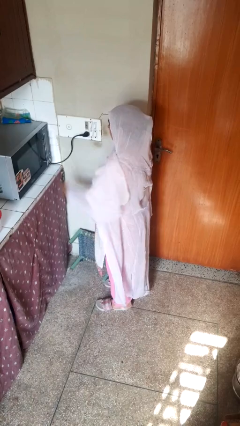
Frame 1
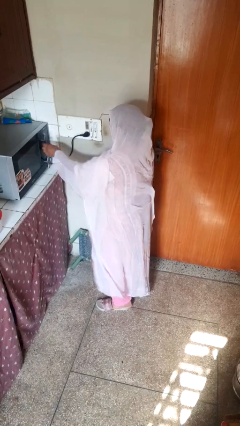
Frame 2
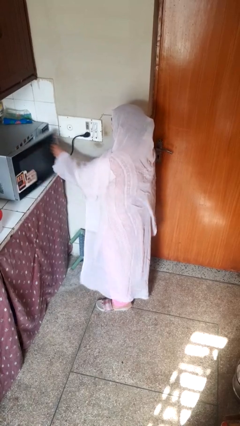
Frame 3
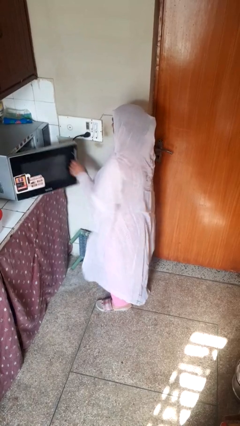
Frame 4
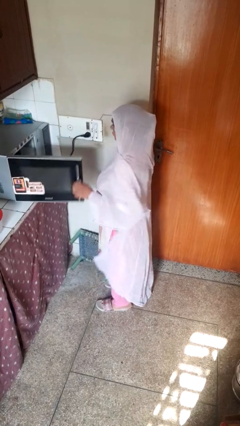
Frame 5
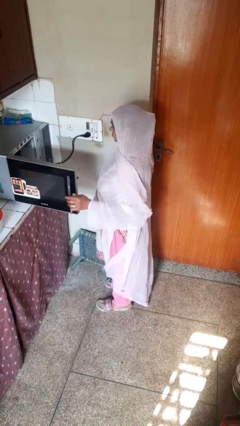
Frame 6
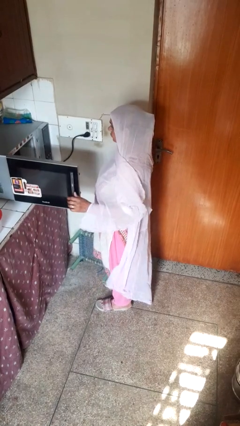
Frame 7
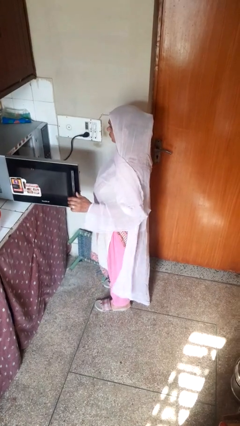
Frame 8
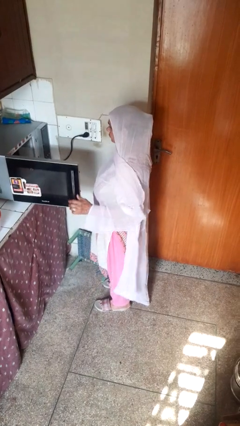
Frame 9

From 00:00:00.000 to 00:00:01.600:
person opens oven door

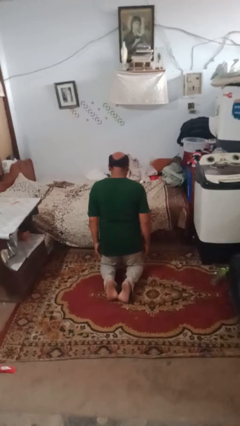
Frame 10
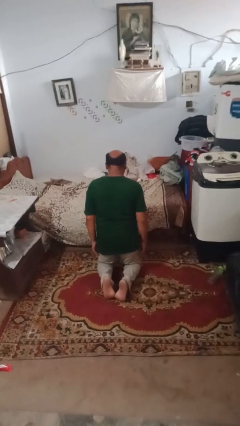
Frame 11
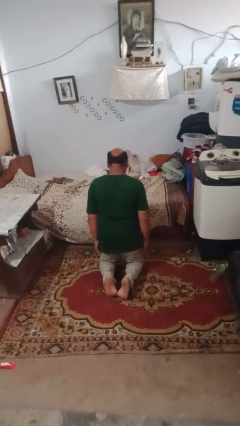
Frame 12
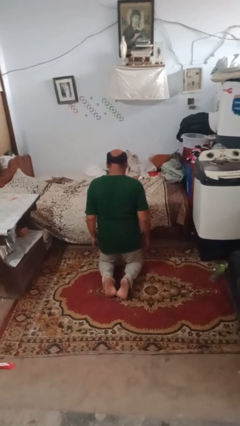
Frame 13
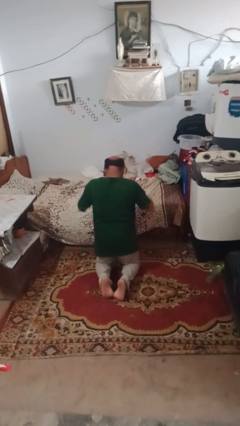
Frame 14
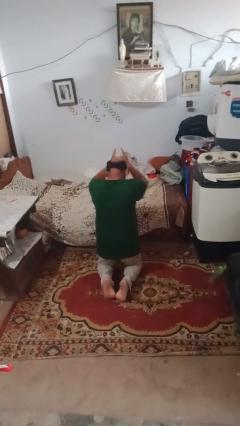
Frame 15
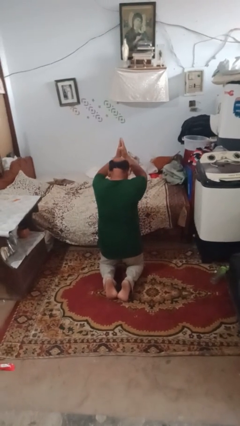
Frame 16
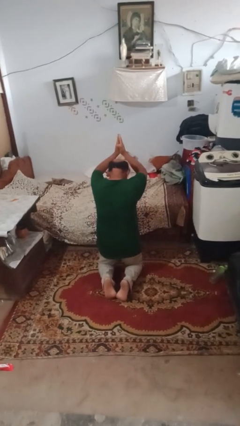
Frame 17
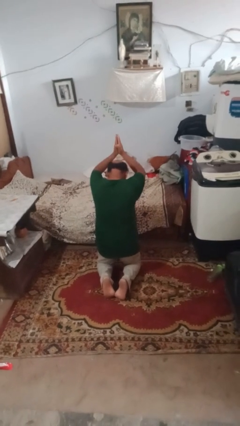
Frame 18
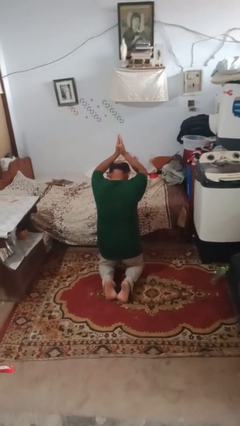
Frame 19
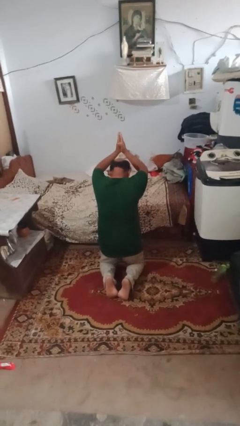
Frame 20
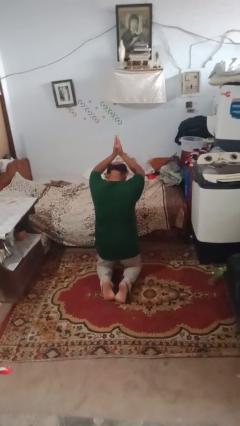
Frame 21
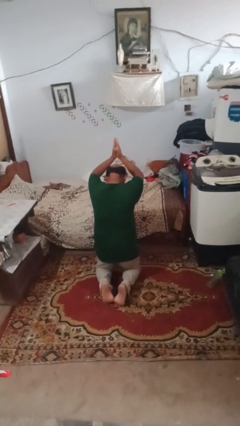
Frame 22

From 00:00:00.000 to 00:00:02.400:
person prays

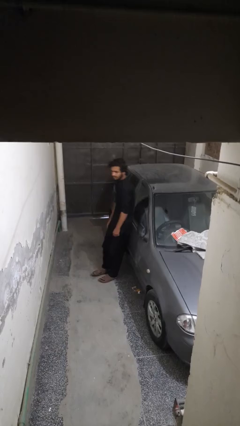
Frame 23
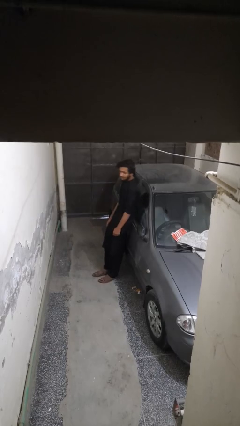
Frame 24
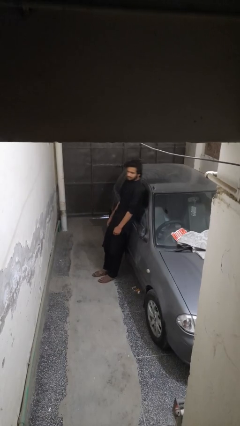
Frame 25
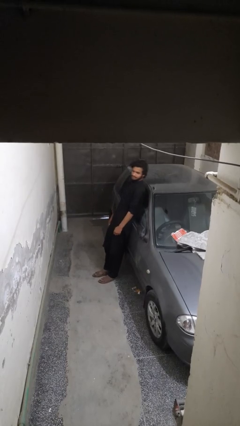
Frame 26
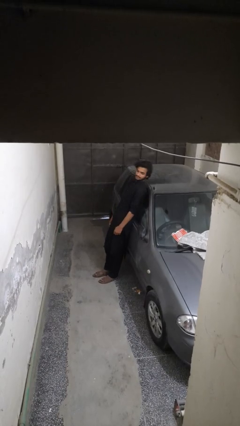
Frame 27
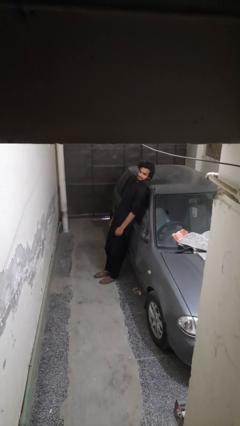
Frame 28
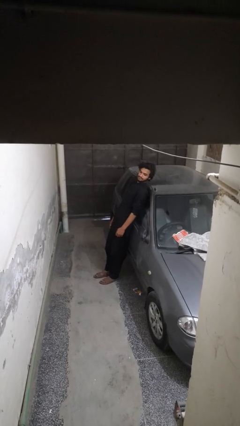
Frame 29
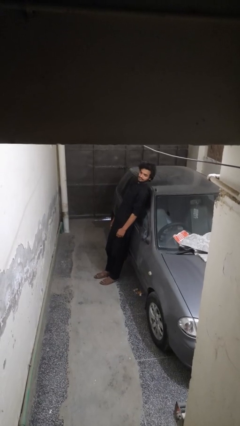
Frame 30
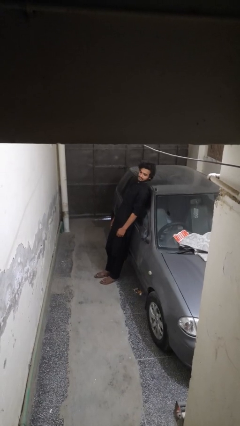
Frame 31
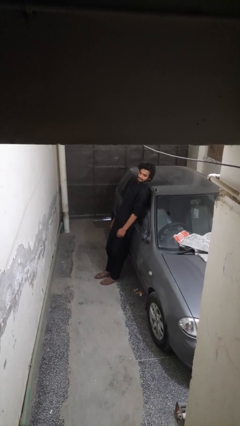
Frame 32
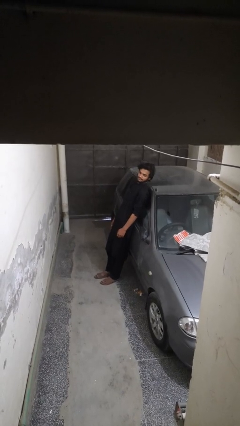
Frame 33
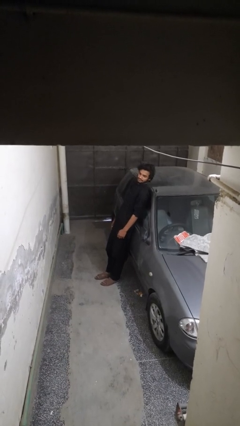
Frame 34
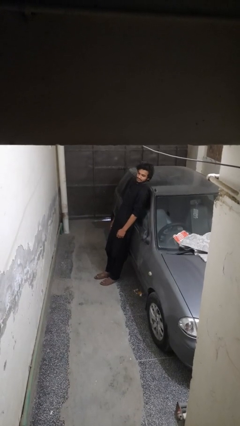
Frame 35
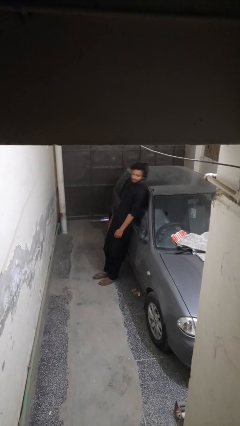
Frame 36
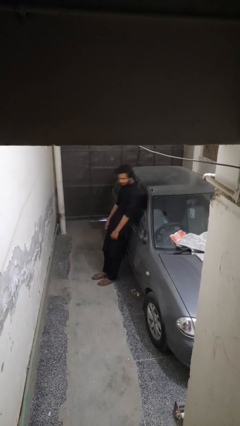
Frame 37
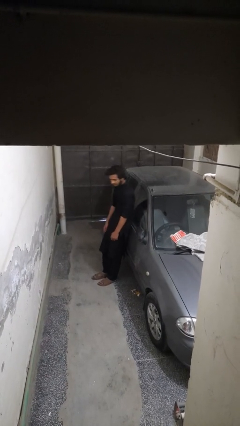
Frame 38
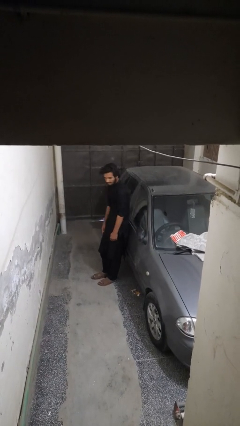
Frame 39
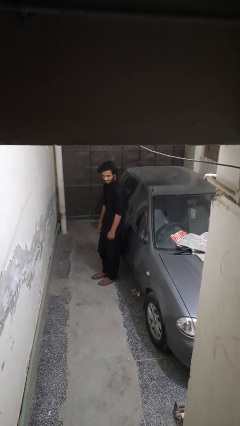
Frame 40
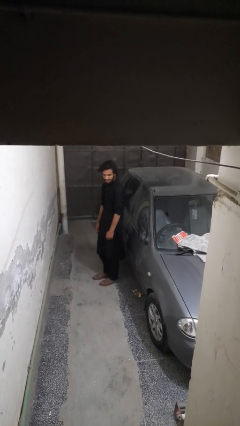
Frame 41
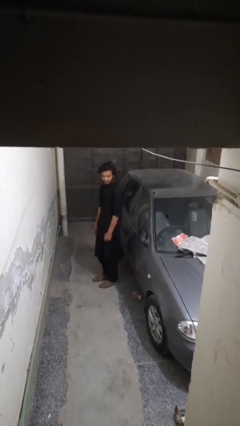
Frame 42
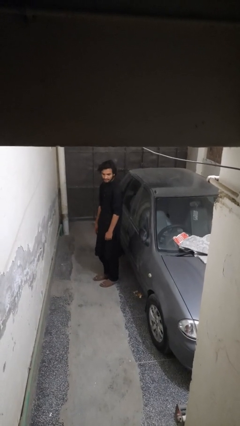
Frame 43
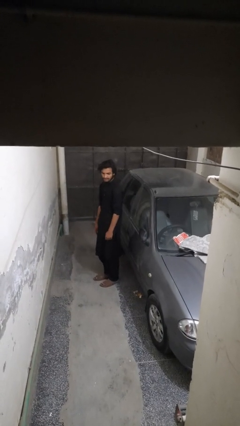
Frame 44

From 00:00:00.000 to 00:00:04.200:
person leans against car

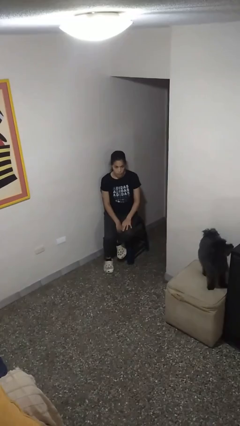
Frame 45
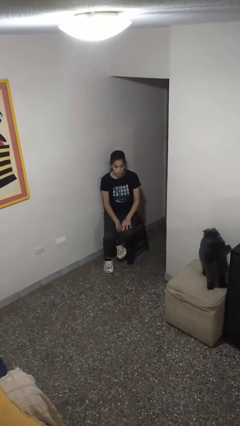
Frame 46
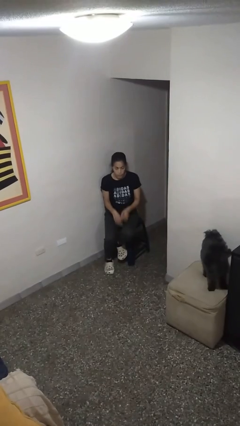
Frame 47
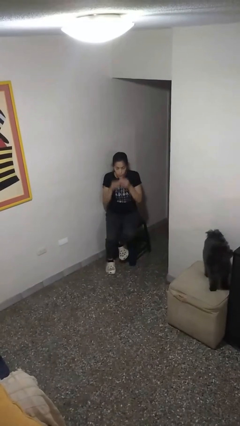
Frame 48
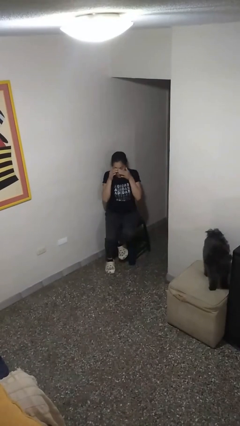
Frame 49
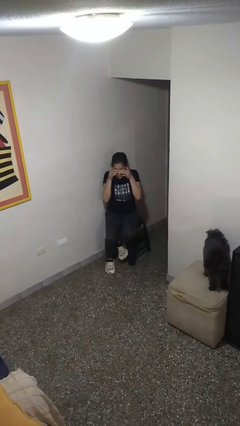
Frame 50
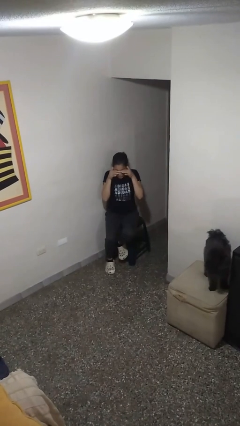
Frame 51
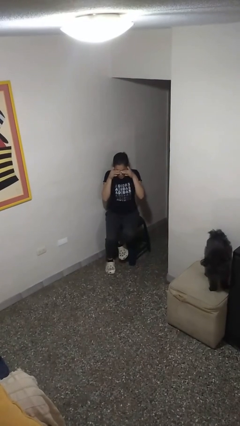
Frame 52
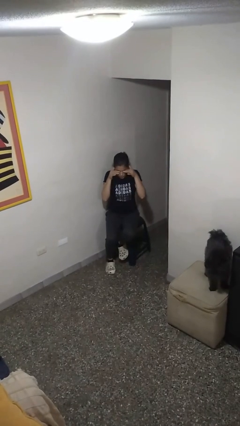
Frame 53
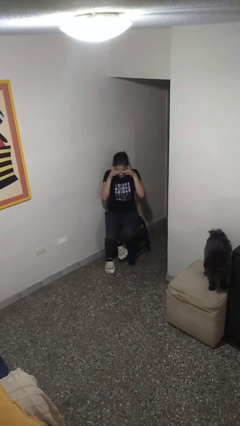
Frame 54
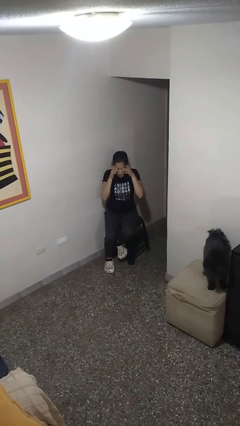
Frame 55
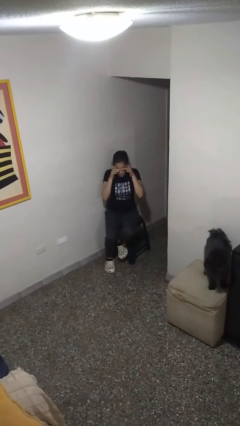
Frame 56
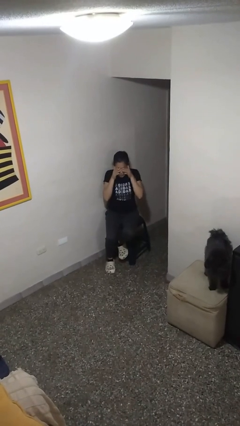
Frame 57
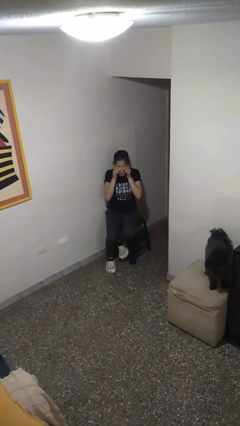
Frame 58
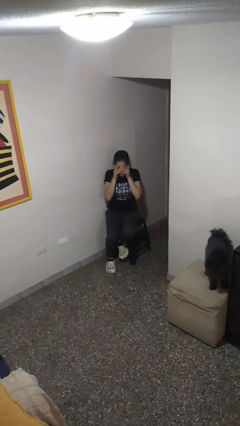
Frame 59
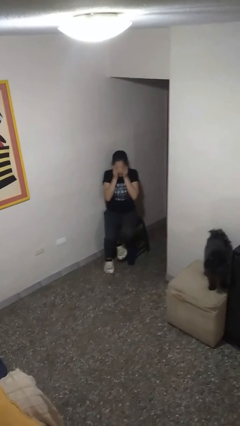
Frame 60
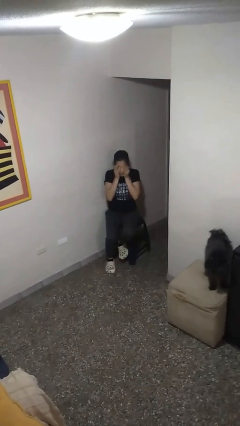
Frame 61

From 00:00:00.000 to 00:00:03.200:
person rubs eyes

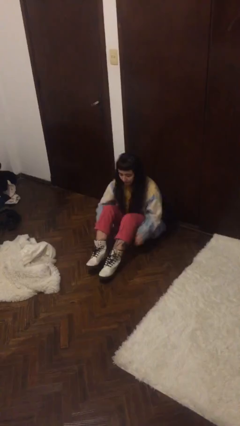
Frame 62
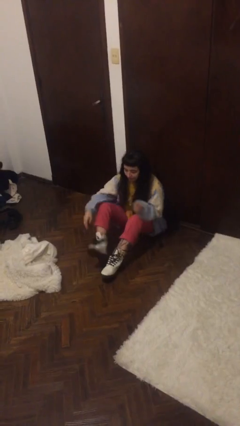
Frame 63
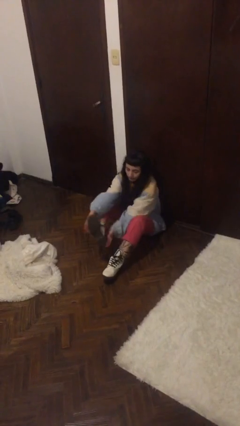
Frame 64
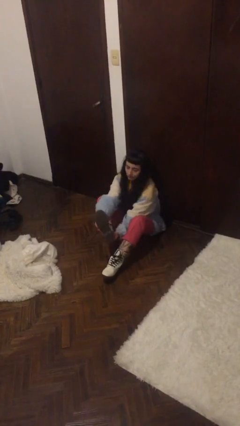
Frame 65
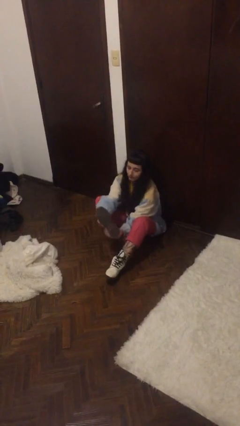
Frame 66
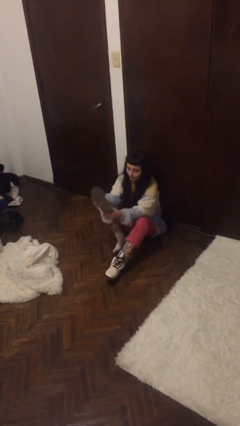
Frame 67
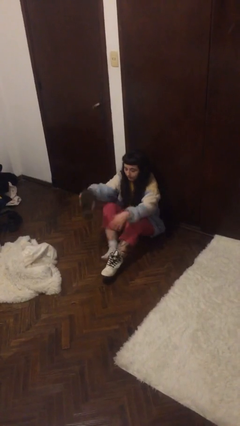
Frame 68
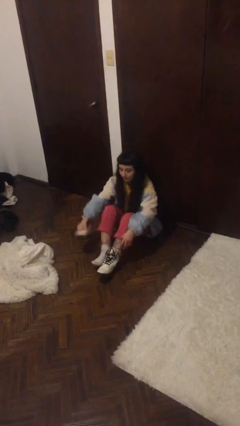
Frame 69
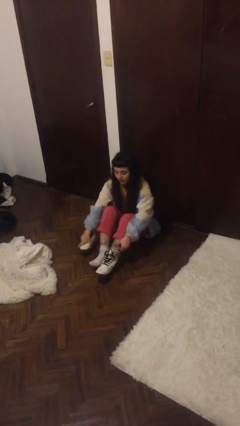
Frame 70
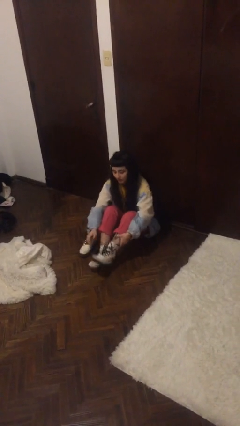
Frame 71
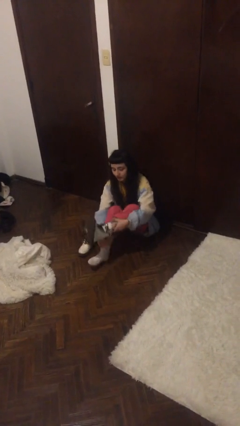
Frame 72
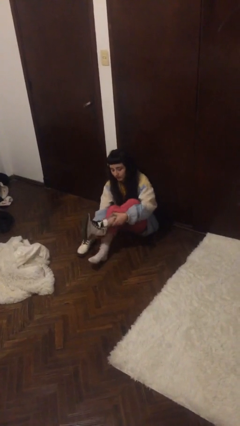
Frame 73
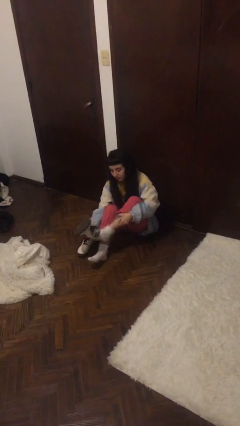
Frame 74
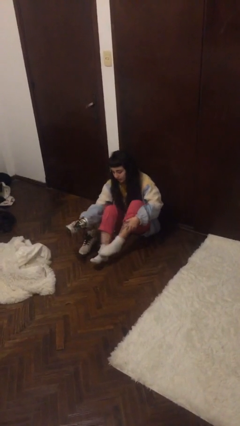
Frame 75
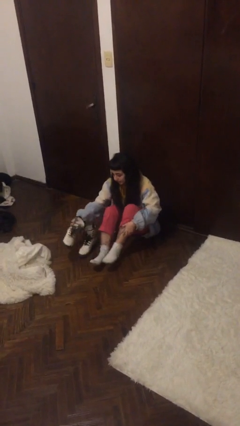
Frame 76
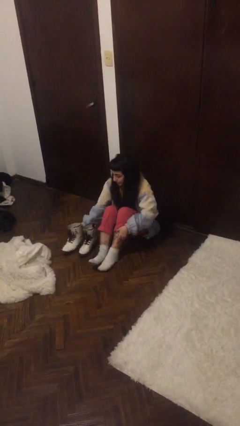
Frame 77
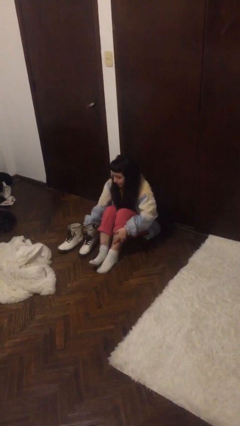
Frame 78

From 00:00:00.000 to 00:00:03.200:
person takes off boots

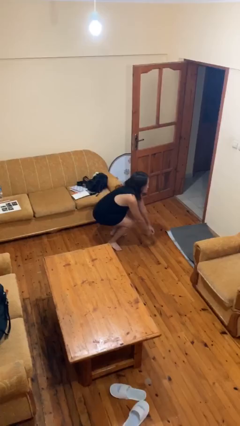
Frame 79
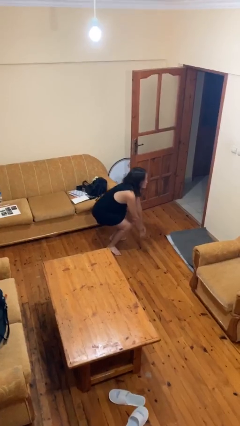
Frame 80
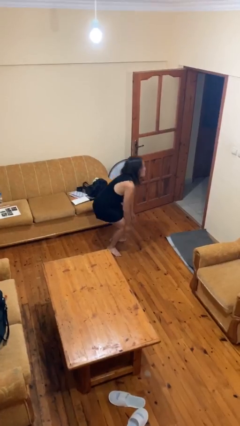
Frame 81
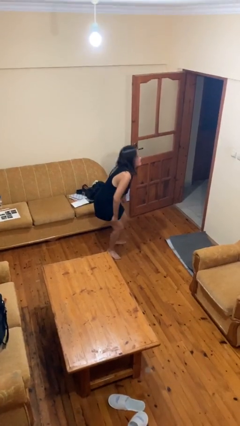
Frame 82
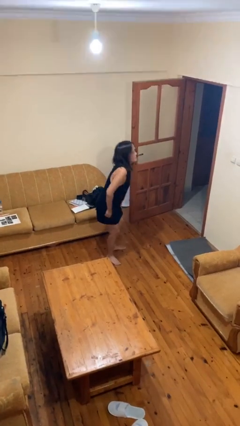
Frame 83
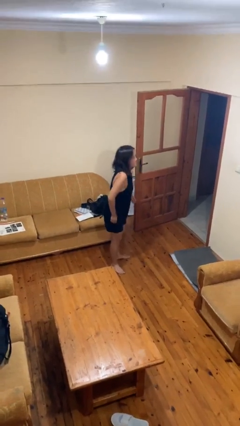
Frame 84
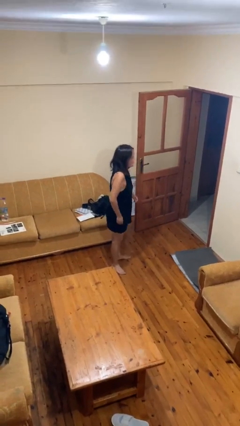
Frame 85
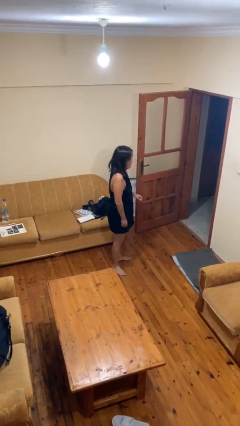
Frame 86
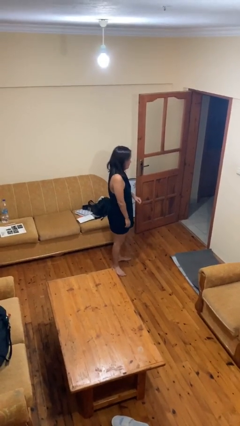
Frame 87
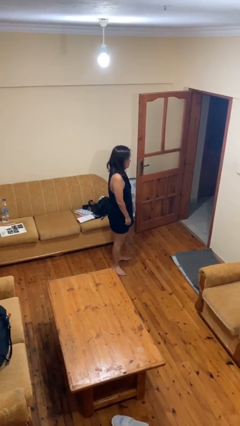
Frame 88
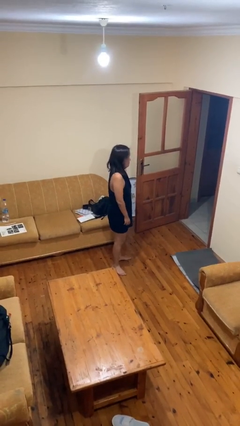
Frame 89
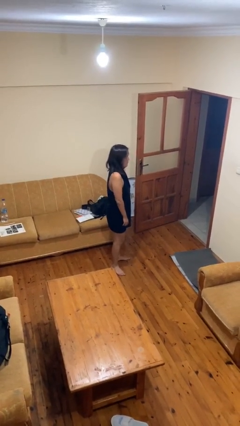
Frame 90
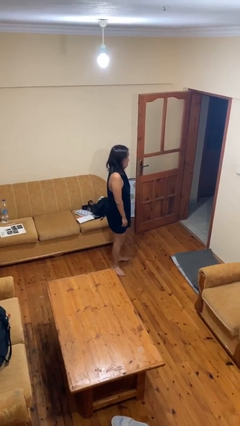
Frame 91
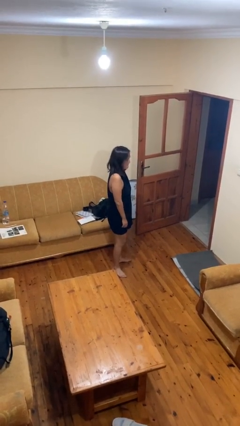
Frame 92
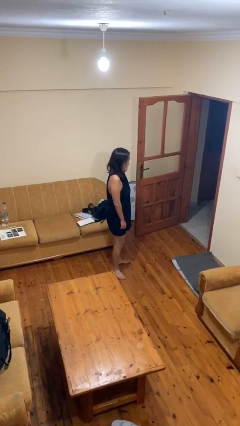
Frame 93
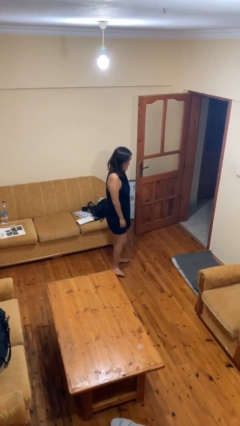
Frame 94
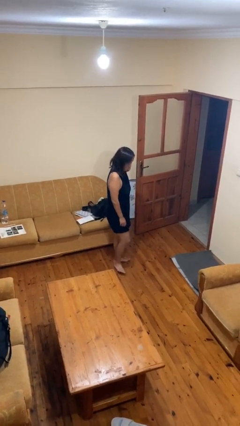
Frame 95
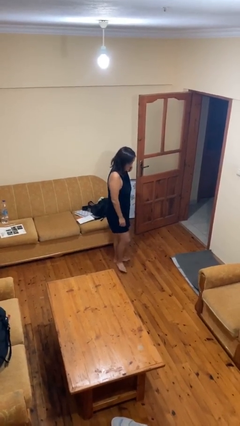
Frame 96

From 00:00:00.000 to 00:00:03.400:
person stands up
